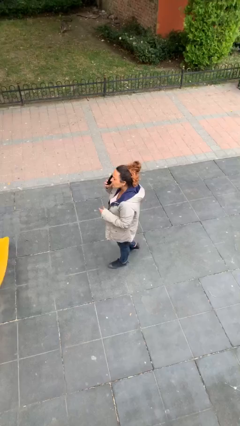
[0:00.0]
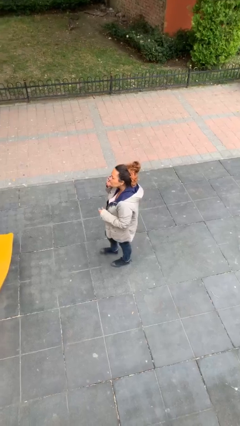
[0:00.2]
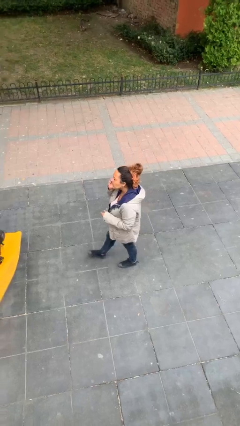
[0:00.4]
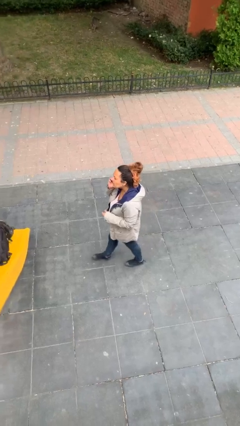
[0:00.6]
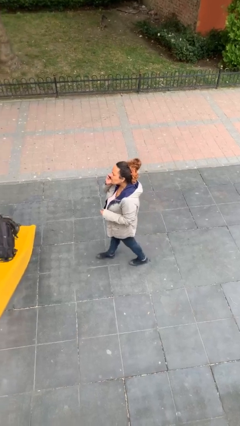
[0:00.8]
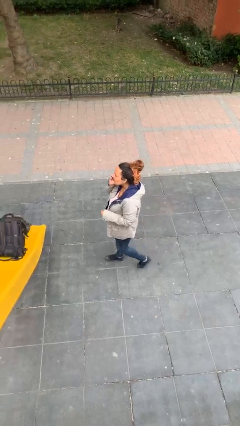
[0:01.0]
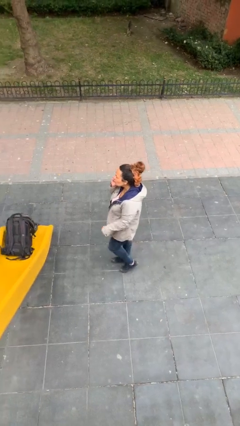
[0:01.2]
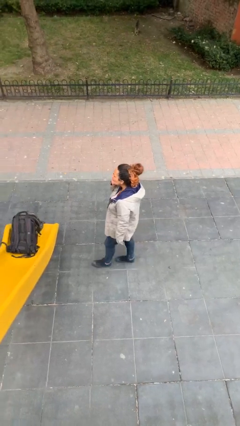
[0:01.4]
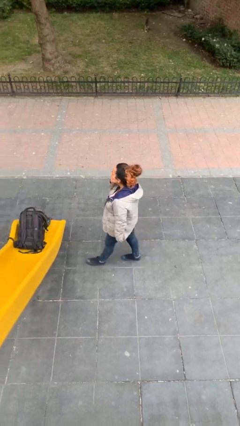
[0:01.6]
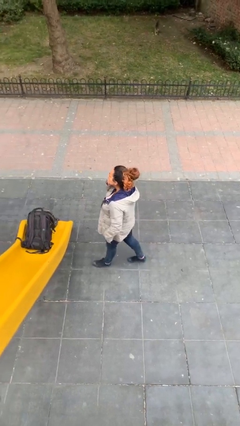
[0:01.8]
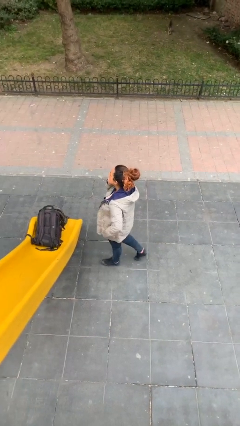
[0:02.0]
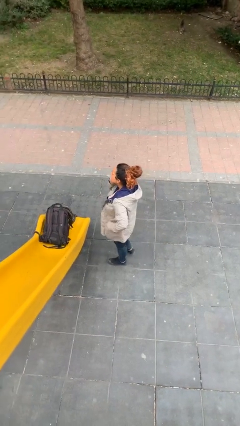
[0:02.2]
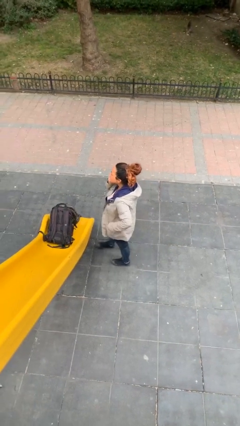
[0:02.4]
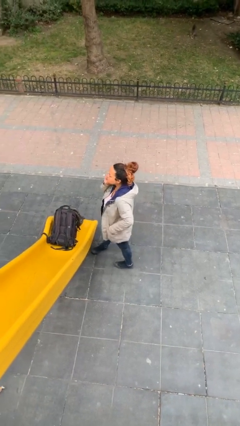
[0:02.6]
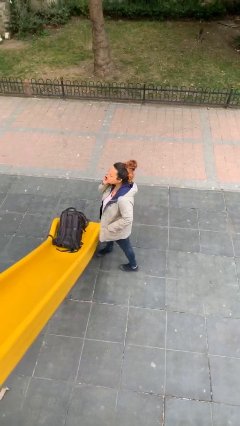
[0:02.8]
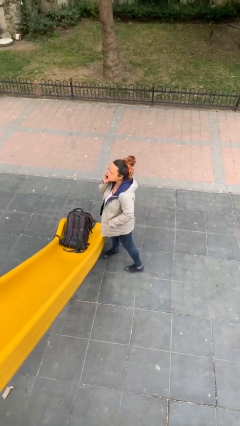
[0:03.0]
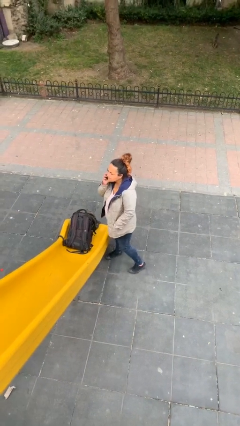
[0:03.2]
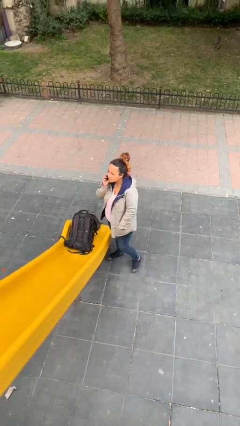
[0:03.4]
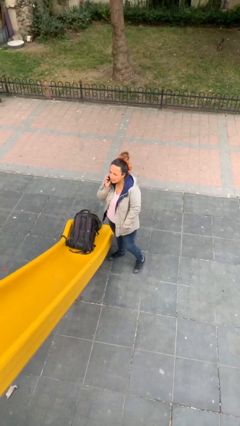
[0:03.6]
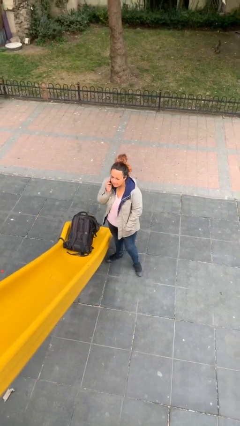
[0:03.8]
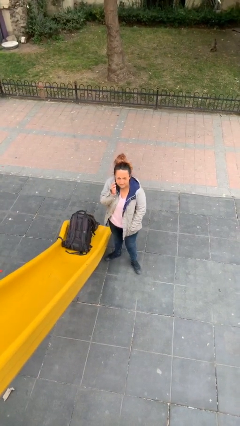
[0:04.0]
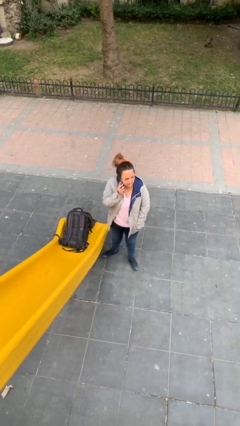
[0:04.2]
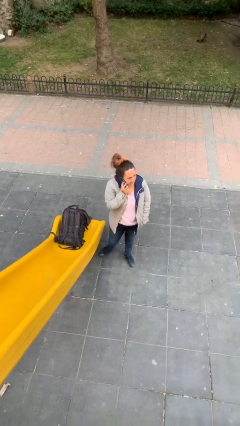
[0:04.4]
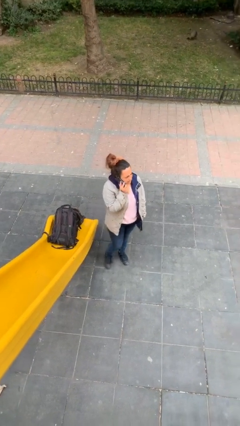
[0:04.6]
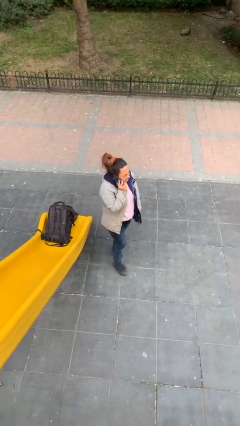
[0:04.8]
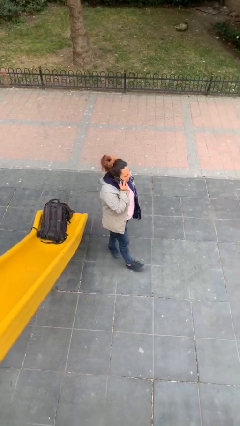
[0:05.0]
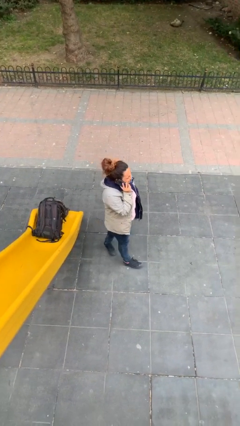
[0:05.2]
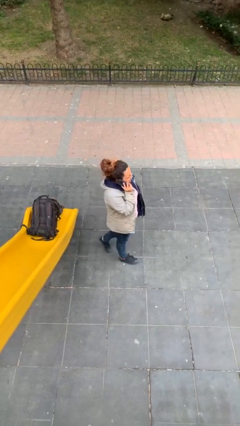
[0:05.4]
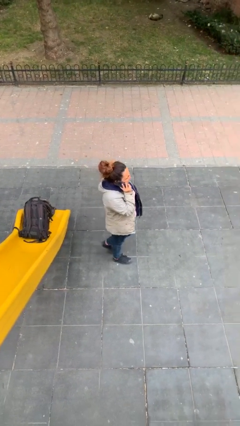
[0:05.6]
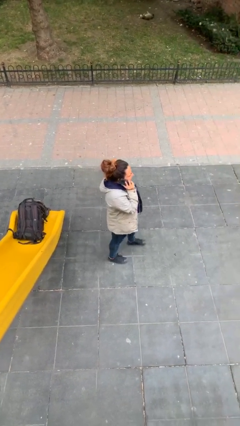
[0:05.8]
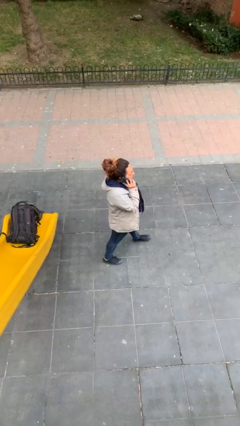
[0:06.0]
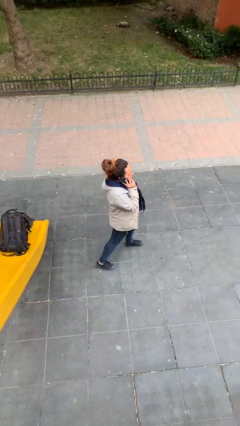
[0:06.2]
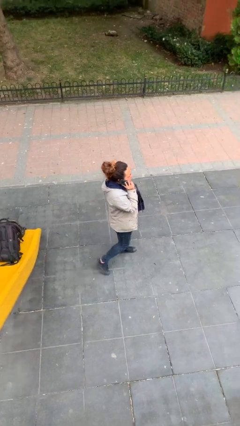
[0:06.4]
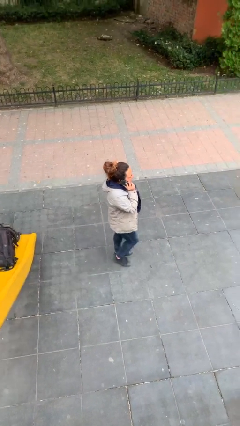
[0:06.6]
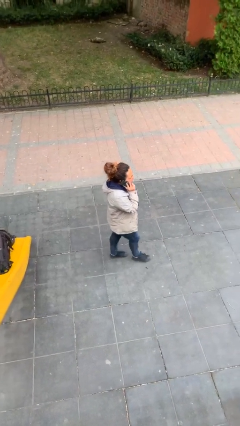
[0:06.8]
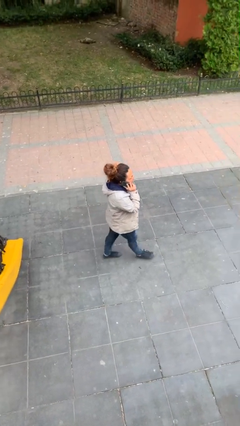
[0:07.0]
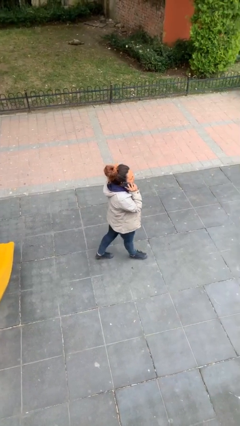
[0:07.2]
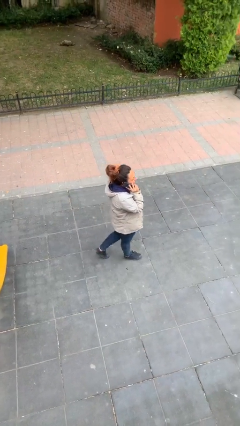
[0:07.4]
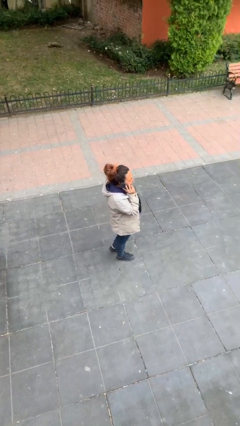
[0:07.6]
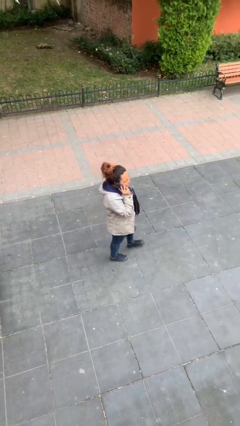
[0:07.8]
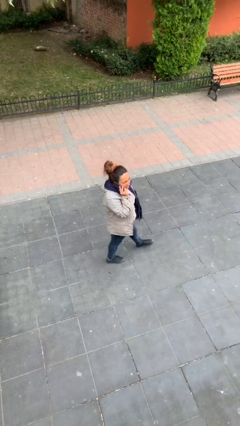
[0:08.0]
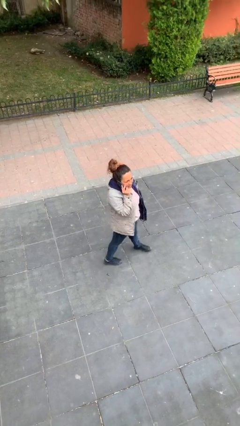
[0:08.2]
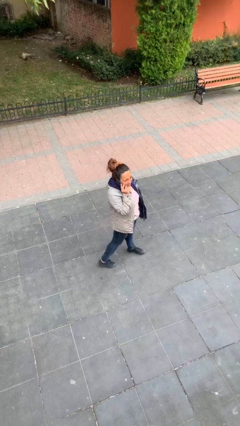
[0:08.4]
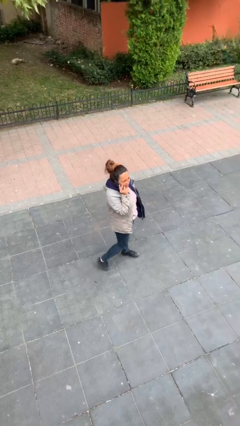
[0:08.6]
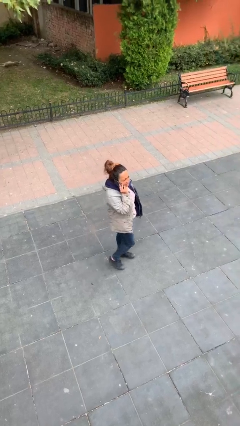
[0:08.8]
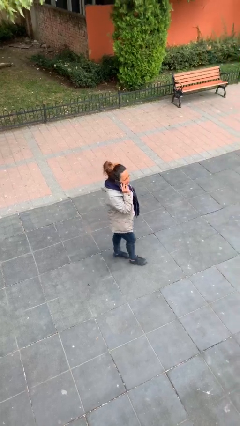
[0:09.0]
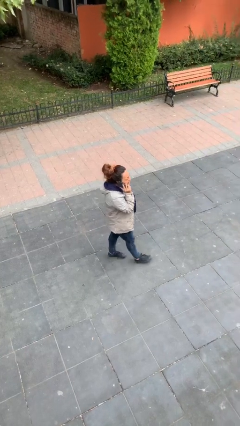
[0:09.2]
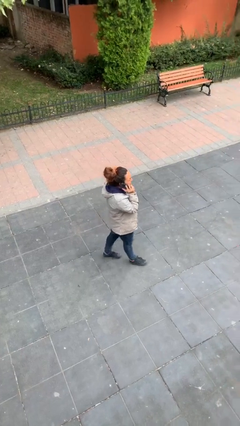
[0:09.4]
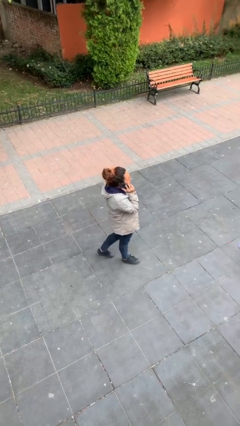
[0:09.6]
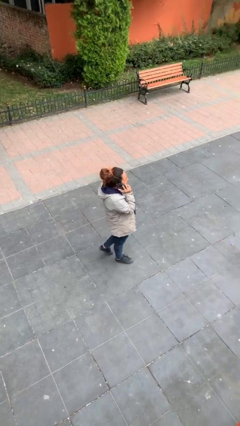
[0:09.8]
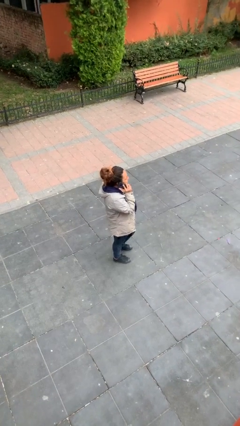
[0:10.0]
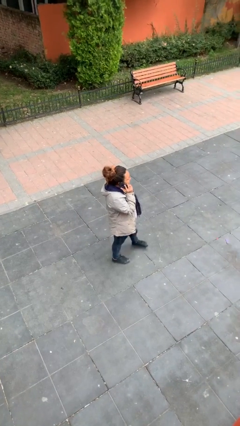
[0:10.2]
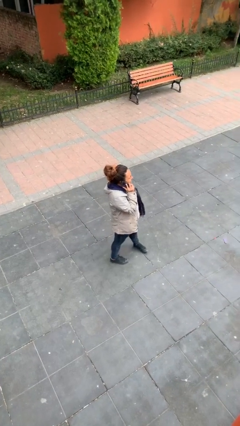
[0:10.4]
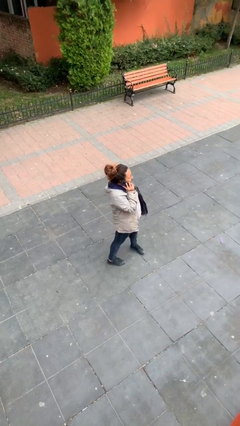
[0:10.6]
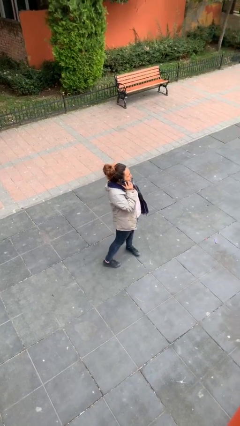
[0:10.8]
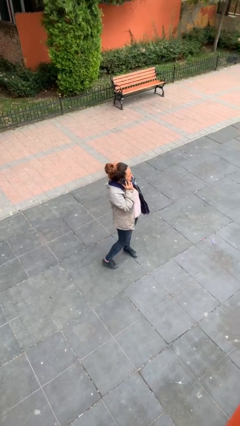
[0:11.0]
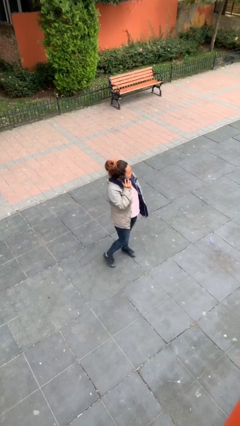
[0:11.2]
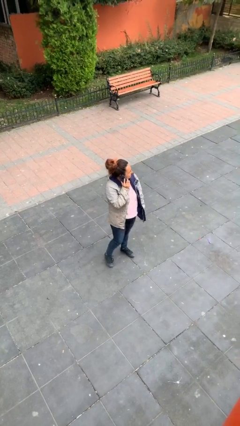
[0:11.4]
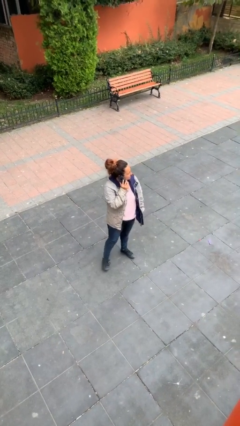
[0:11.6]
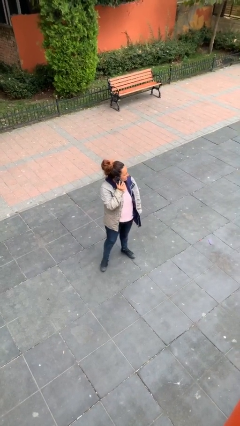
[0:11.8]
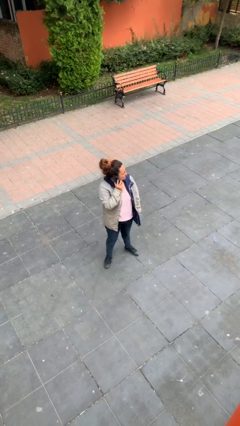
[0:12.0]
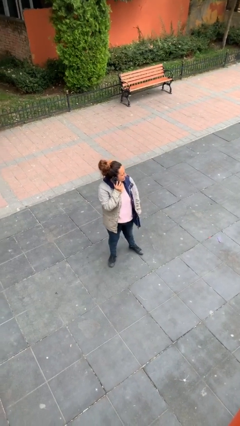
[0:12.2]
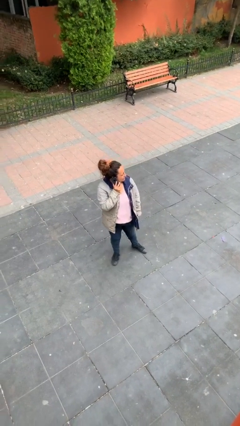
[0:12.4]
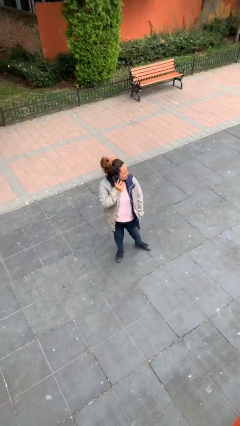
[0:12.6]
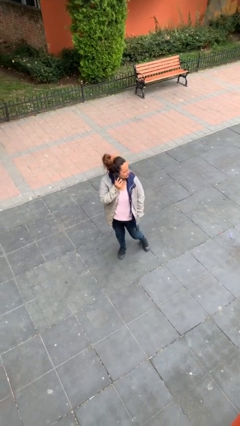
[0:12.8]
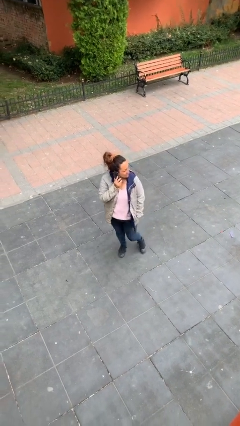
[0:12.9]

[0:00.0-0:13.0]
person talks on phone

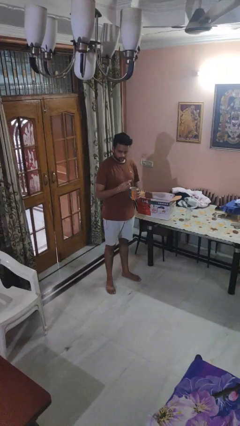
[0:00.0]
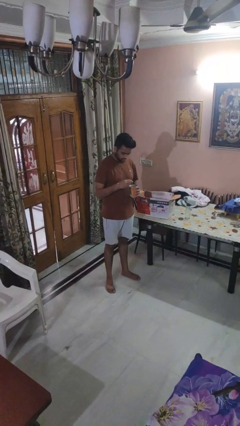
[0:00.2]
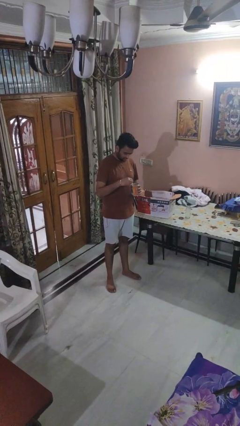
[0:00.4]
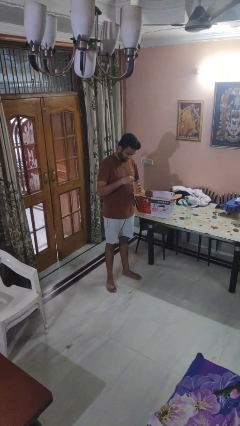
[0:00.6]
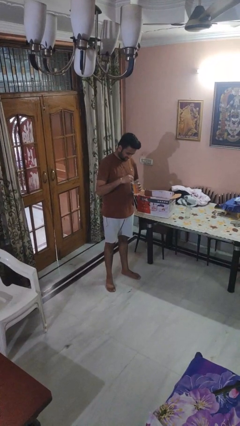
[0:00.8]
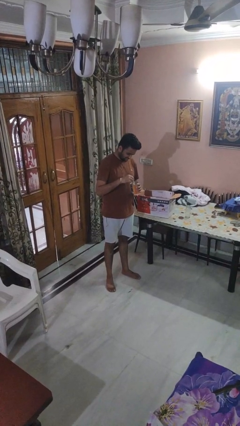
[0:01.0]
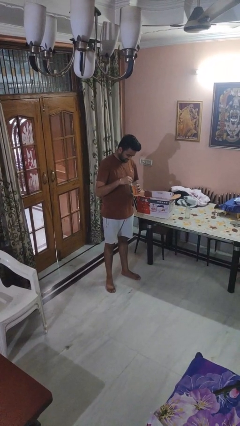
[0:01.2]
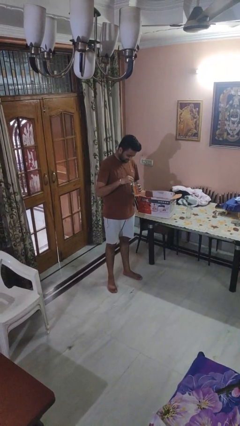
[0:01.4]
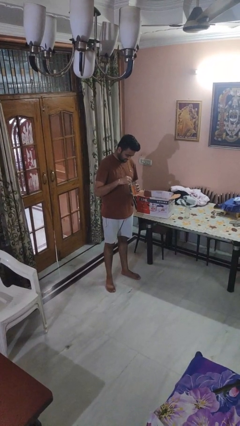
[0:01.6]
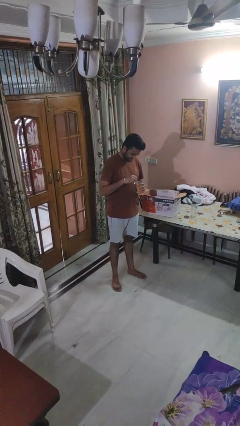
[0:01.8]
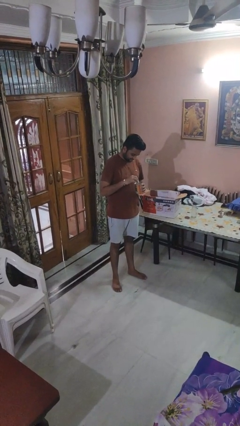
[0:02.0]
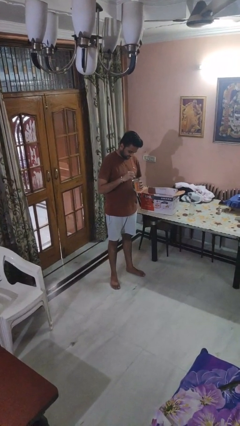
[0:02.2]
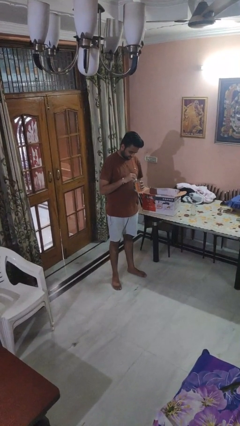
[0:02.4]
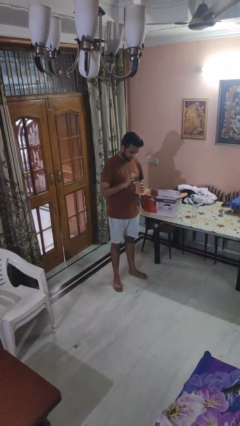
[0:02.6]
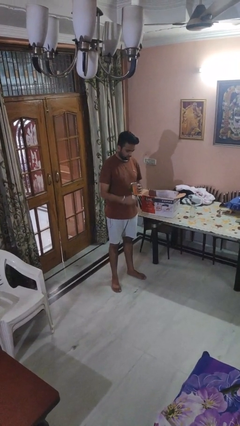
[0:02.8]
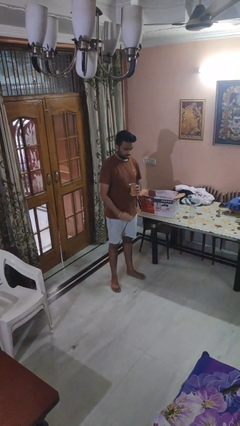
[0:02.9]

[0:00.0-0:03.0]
person opens can with can opener

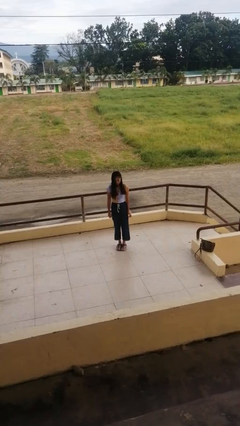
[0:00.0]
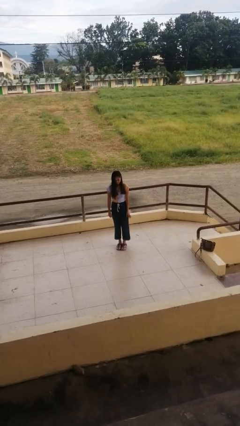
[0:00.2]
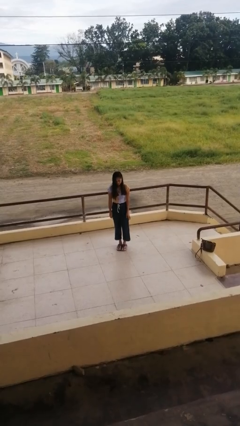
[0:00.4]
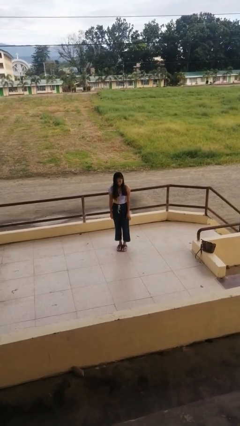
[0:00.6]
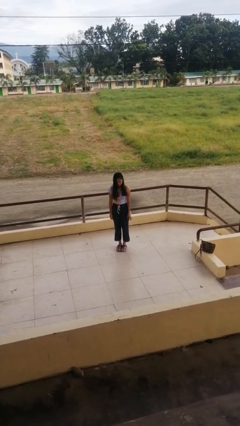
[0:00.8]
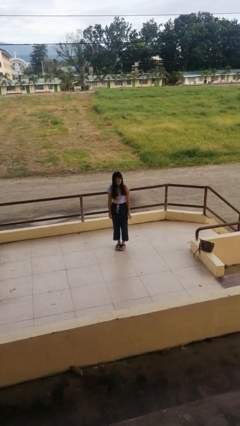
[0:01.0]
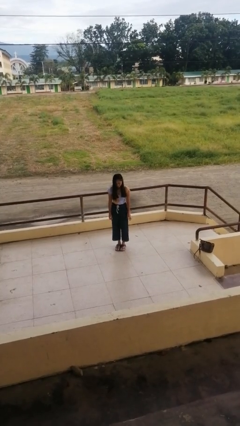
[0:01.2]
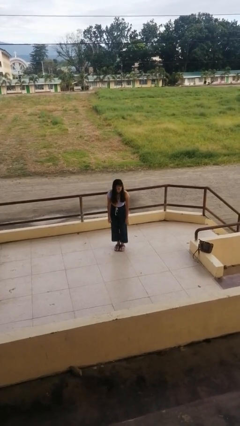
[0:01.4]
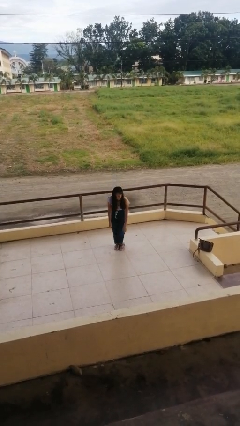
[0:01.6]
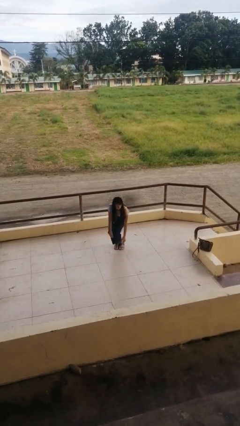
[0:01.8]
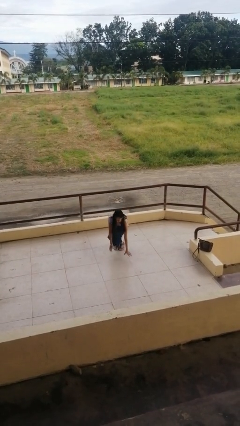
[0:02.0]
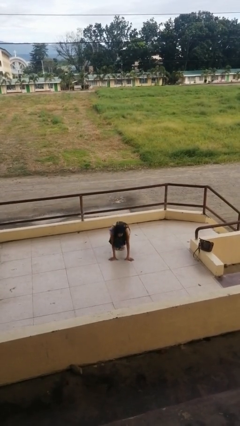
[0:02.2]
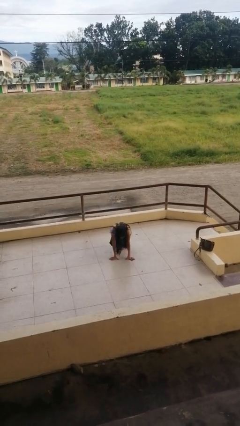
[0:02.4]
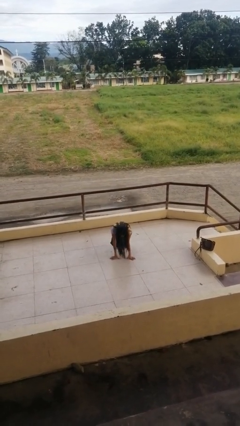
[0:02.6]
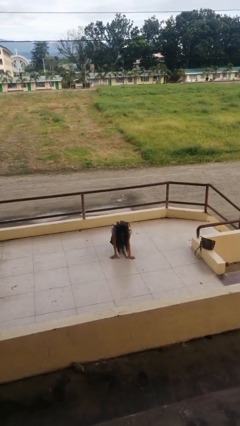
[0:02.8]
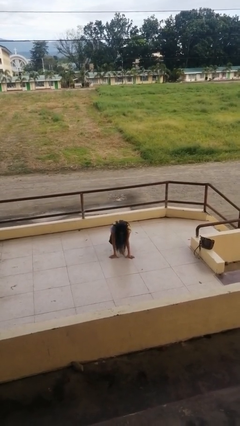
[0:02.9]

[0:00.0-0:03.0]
person falls while standing
